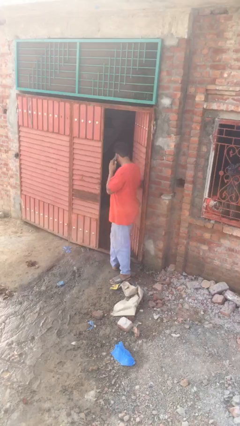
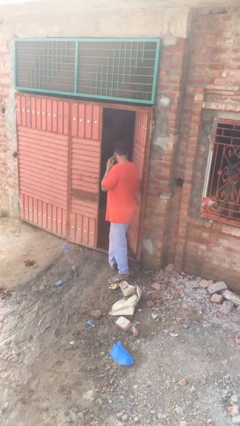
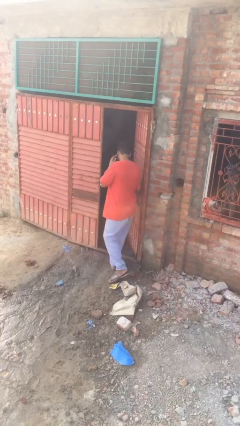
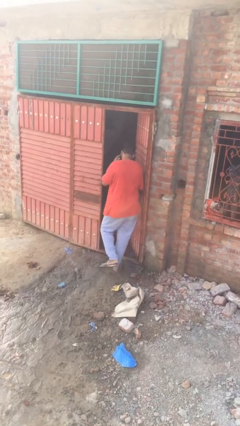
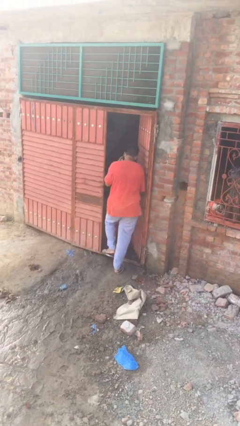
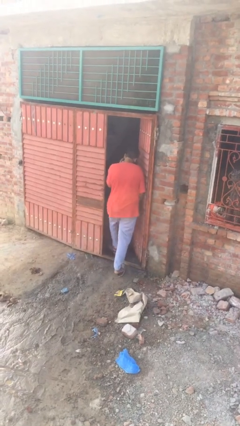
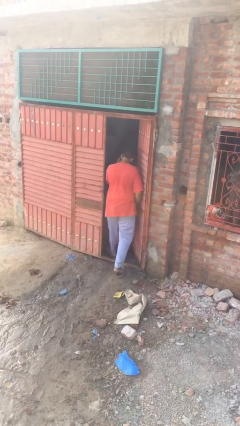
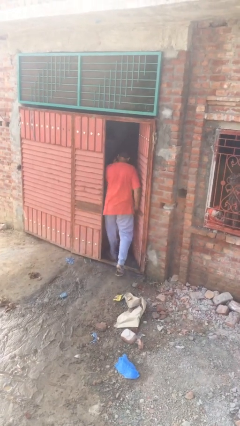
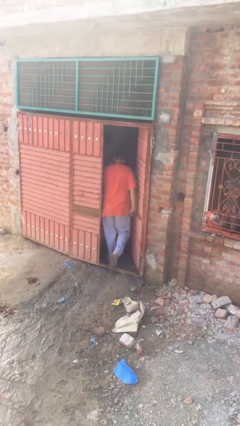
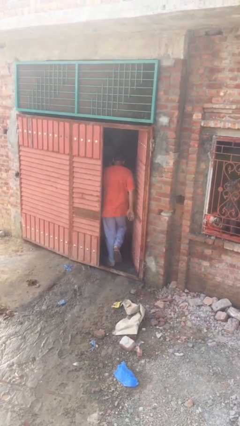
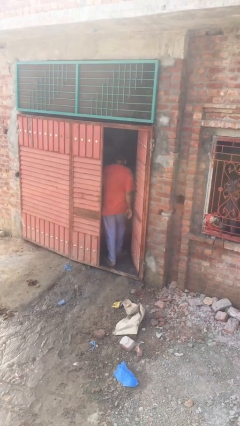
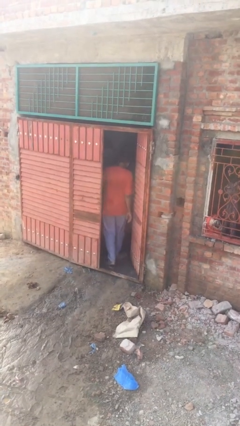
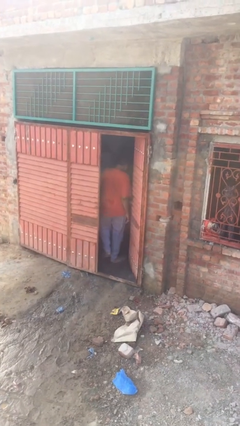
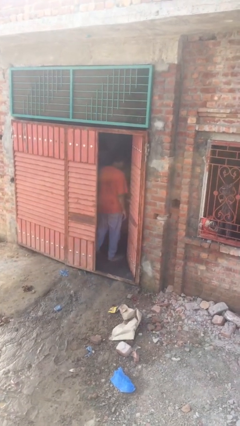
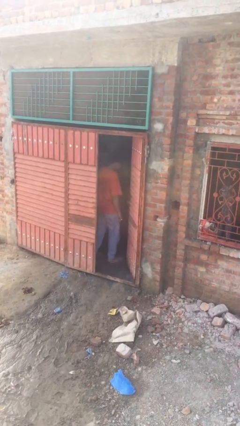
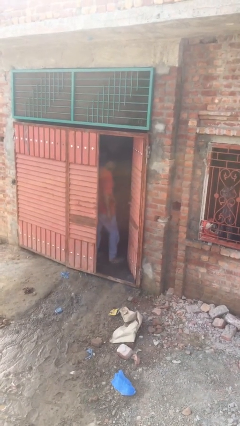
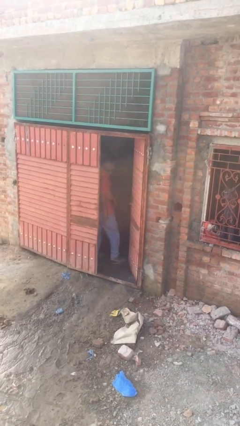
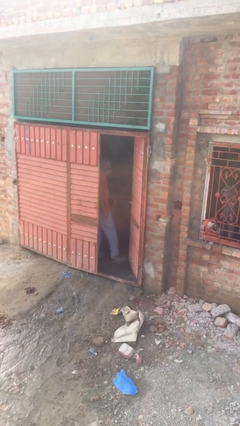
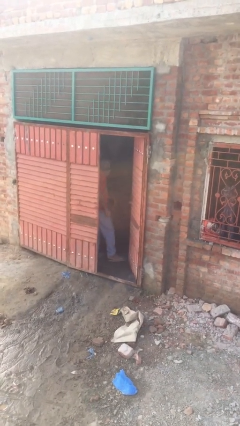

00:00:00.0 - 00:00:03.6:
person exits scene through structure

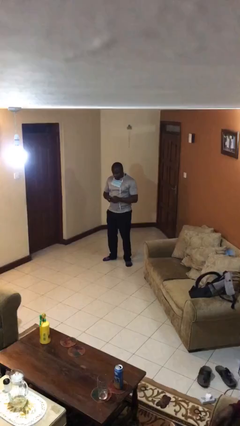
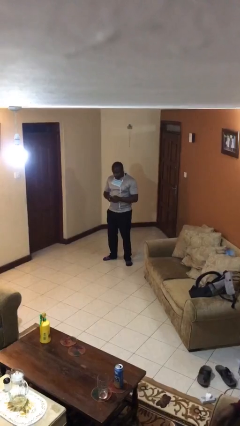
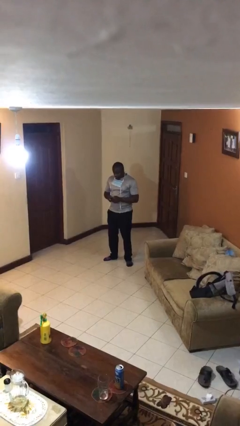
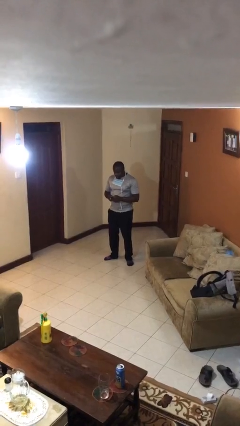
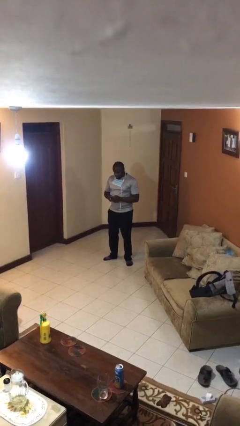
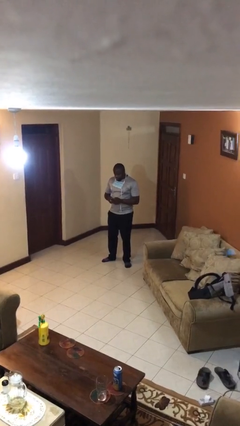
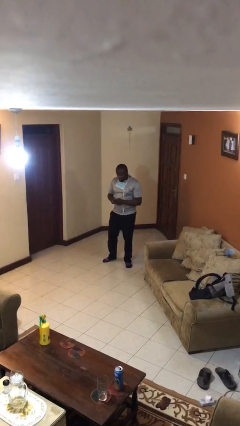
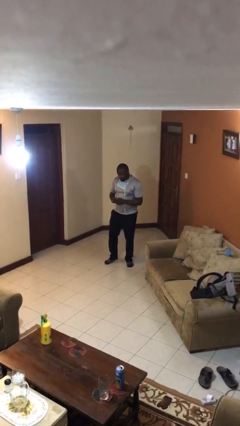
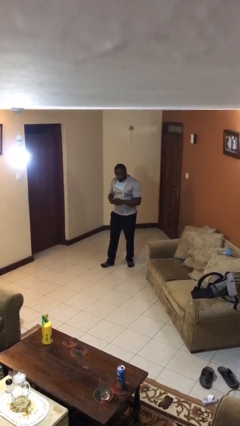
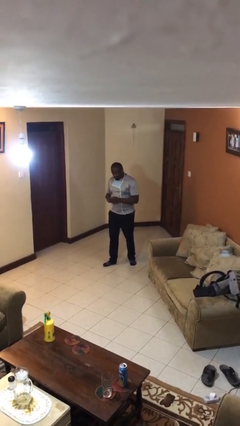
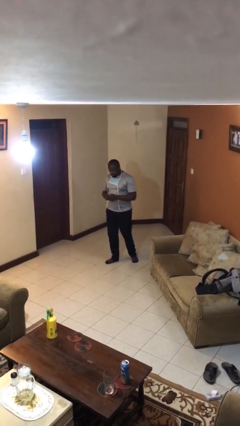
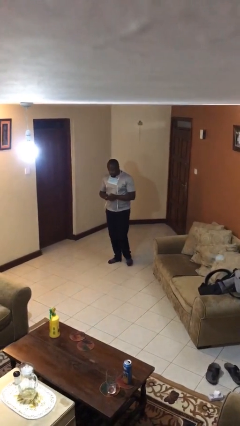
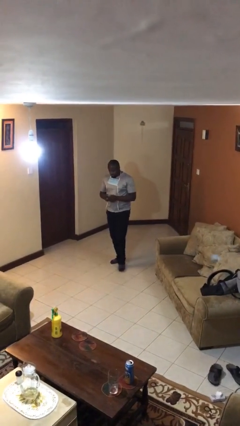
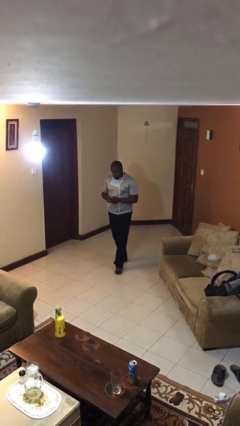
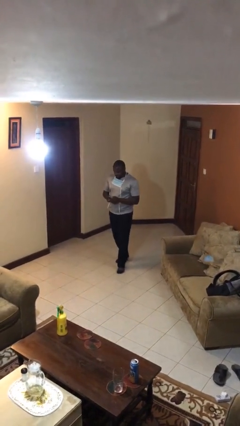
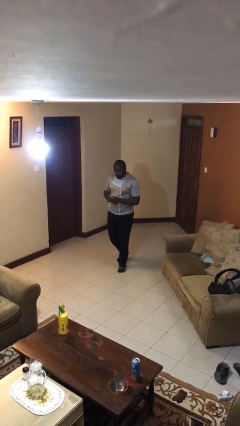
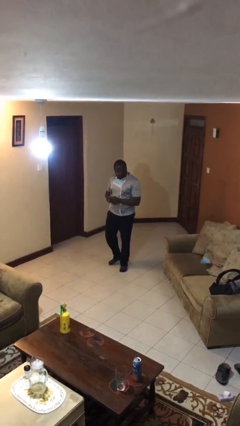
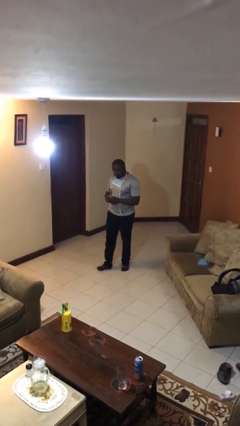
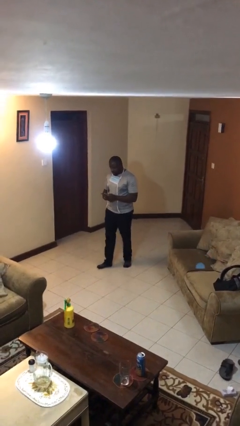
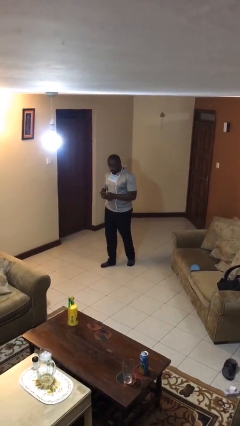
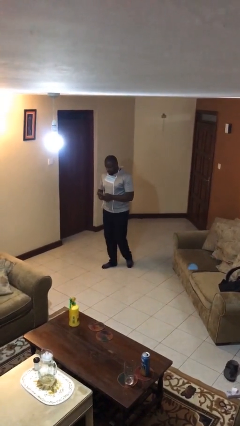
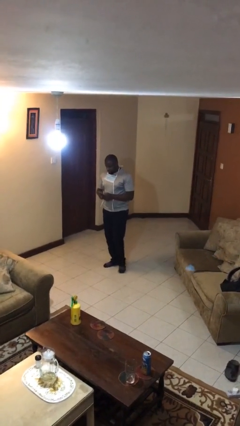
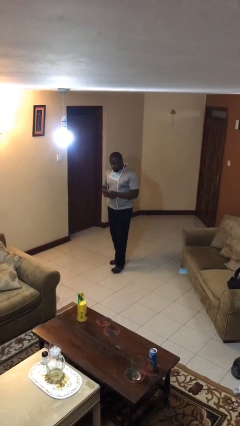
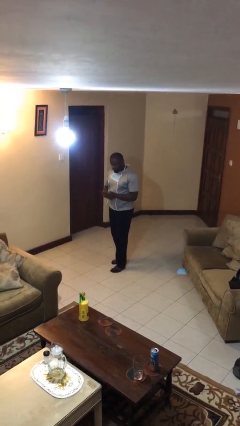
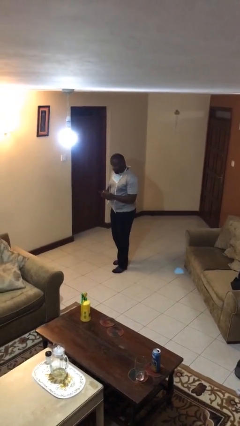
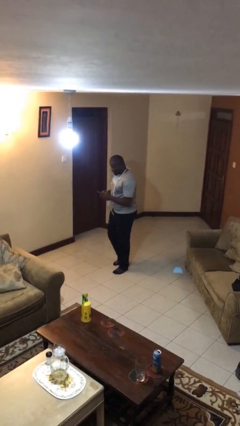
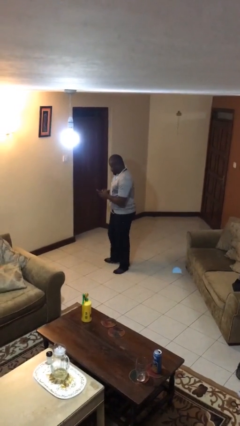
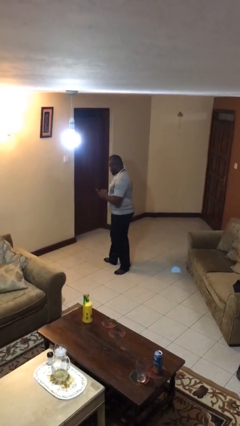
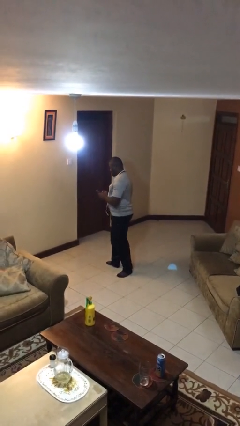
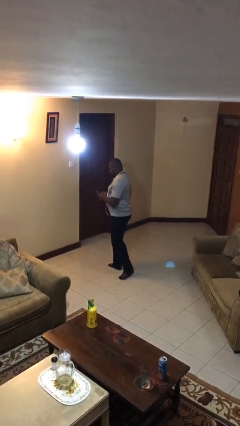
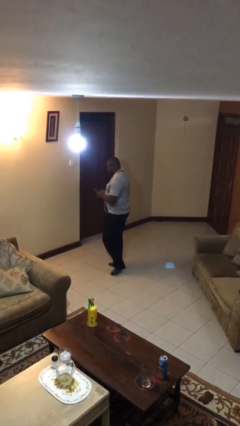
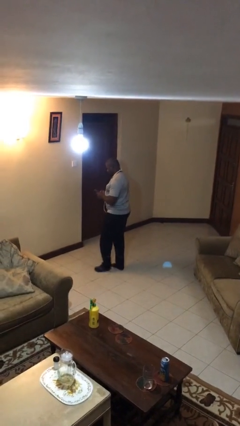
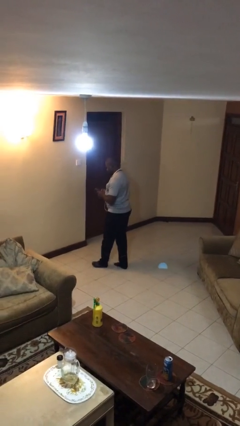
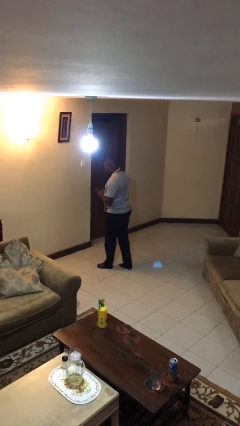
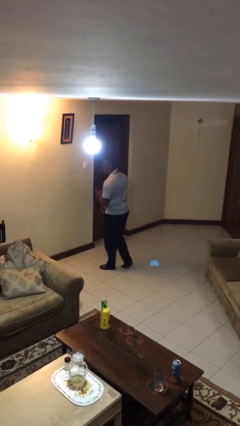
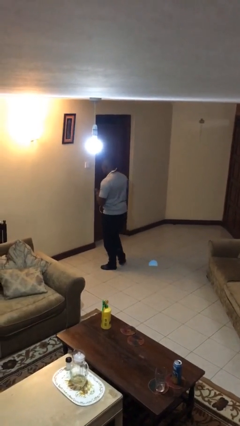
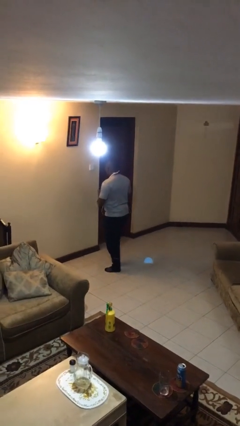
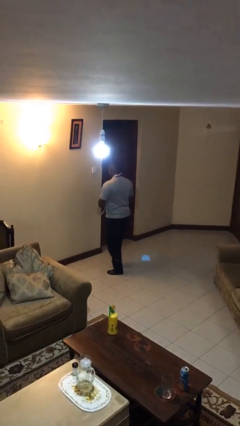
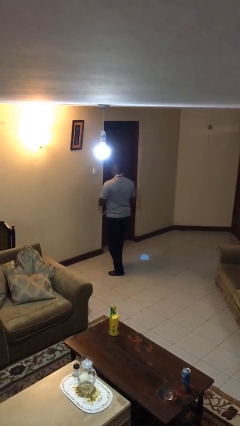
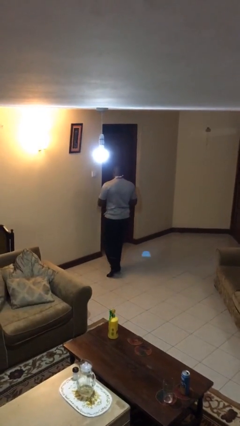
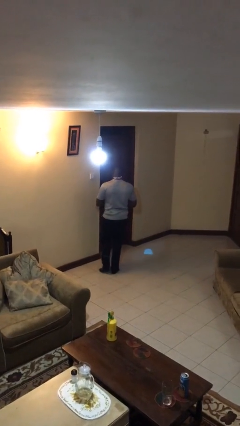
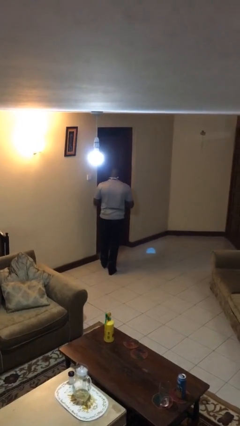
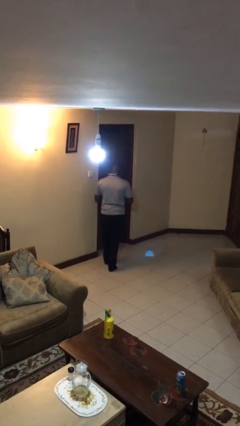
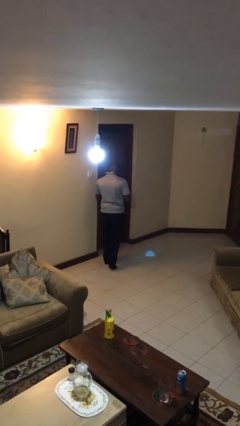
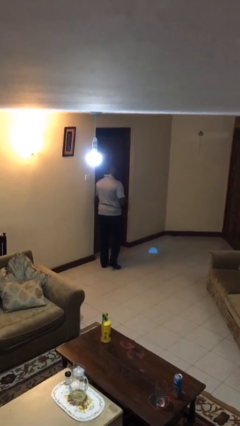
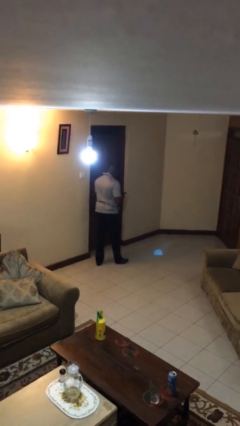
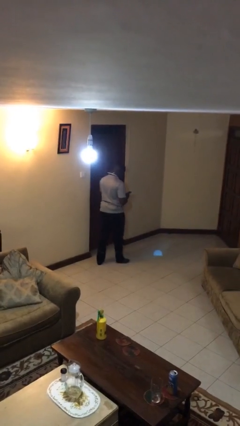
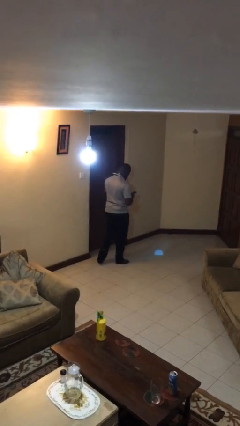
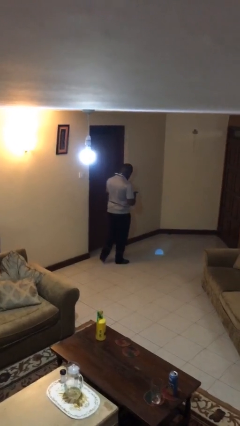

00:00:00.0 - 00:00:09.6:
person texts on phone

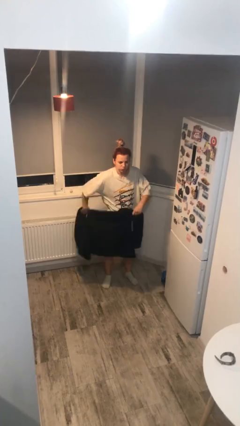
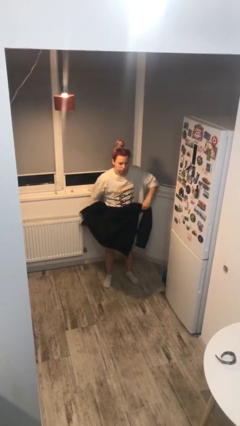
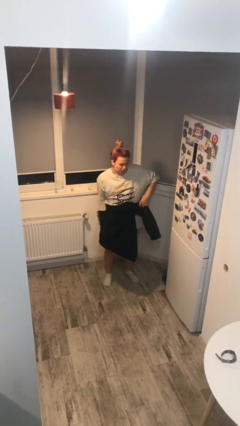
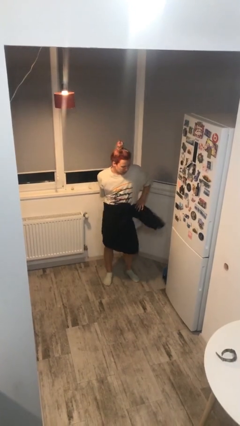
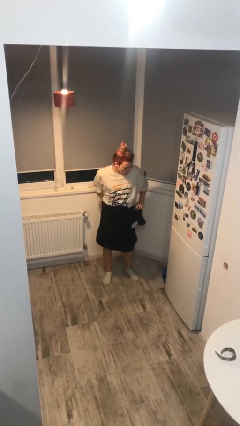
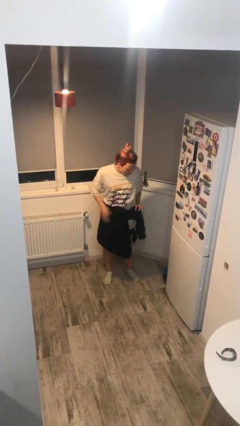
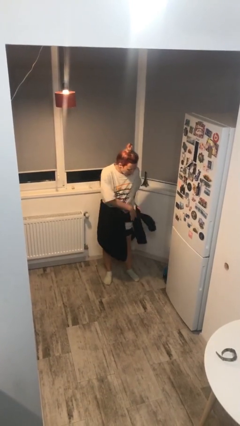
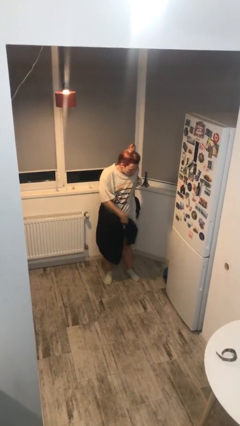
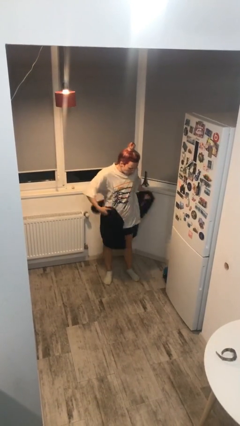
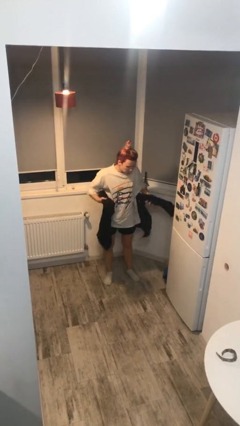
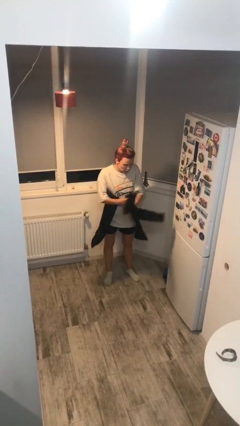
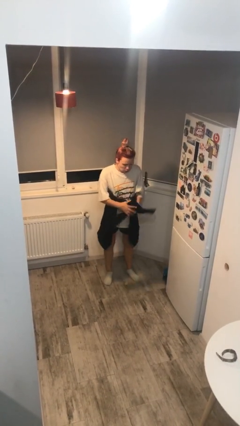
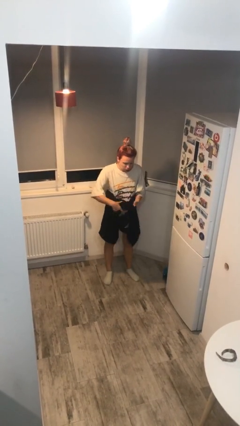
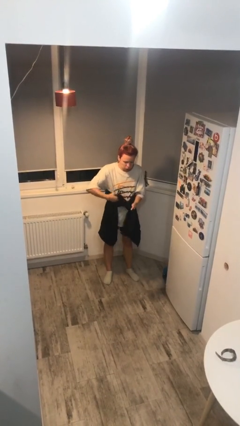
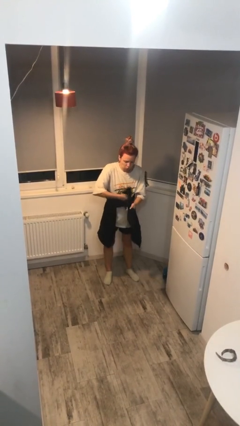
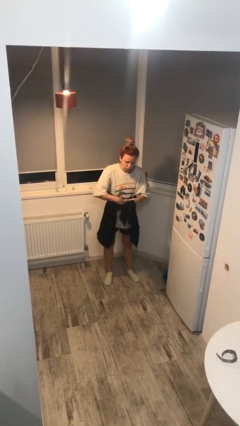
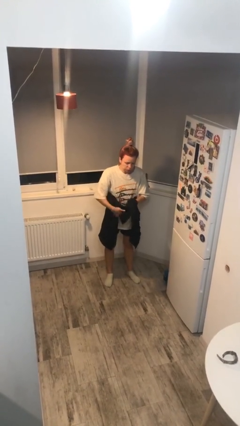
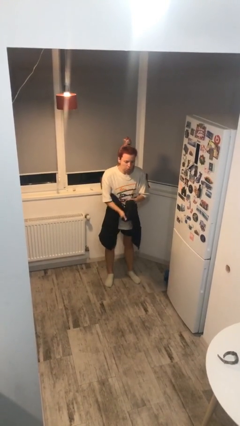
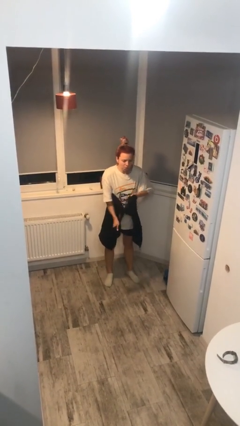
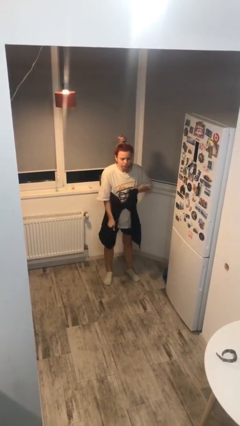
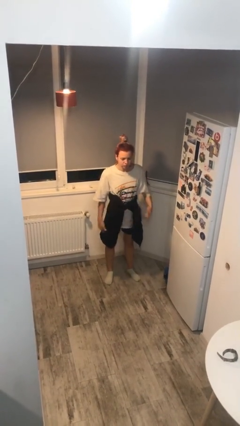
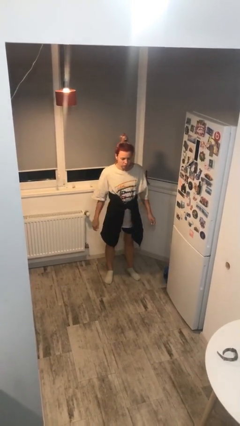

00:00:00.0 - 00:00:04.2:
person ties jacket around waist

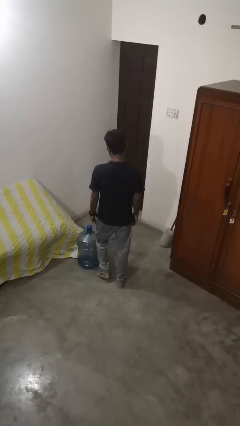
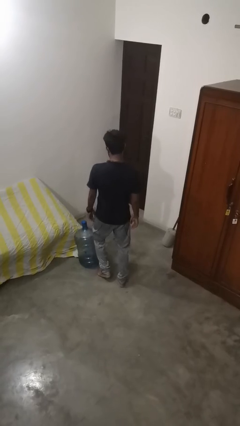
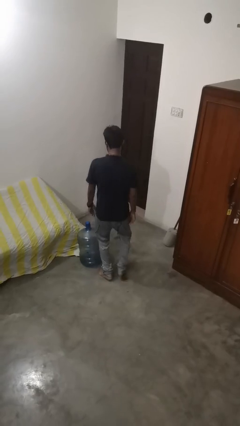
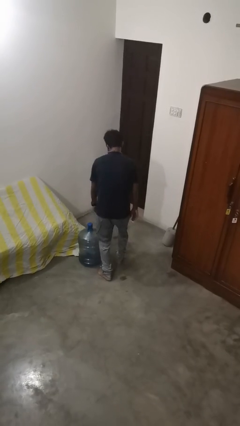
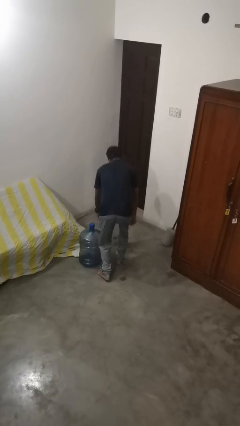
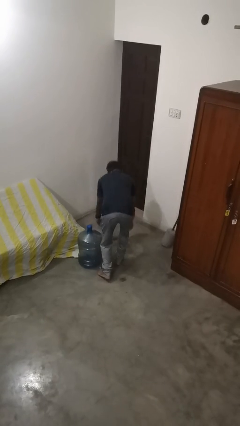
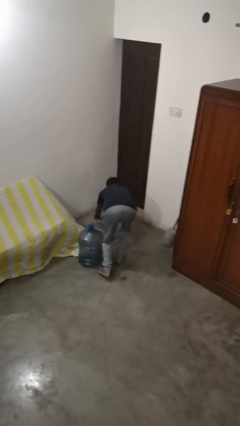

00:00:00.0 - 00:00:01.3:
person trips on object on floor
